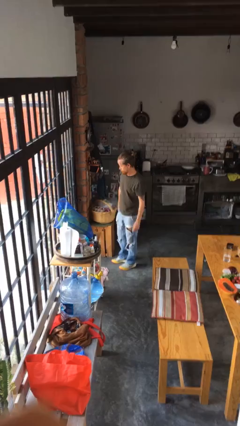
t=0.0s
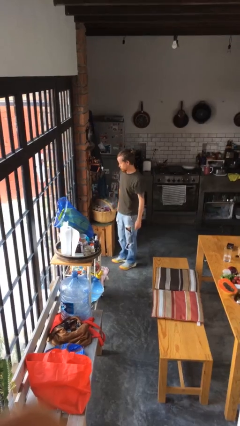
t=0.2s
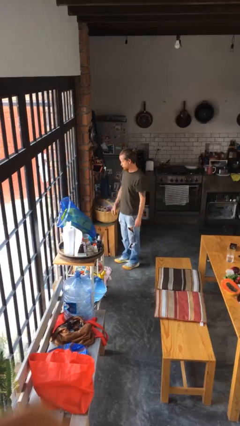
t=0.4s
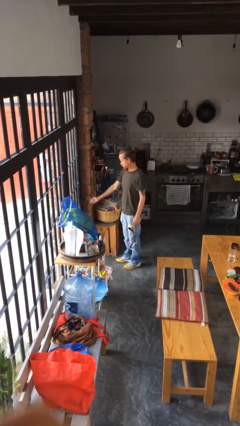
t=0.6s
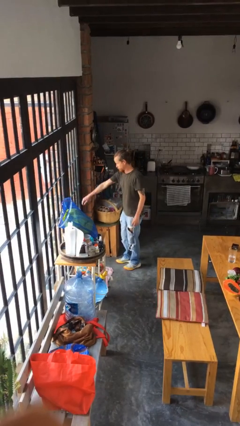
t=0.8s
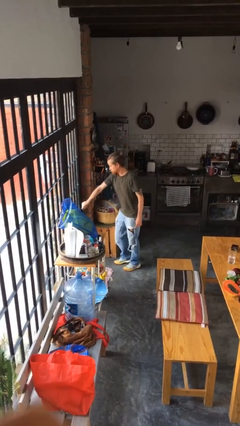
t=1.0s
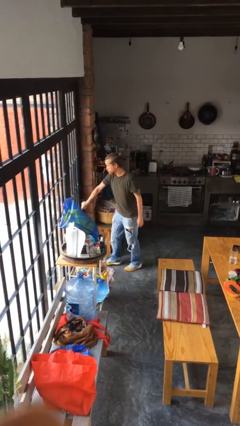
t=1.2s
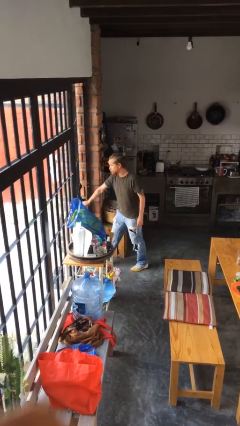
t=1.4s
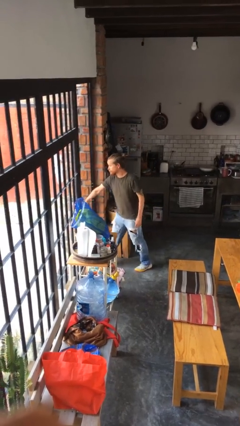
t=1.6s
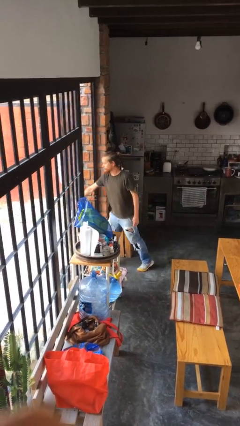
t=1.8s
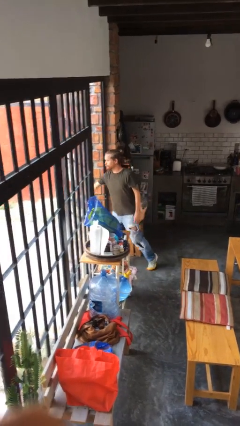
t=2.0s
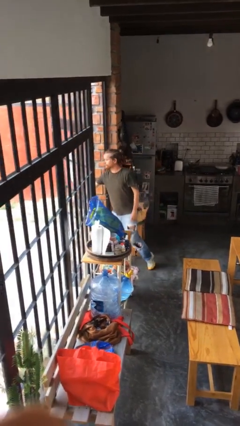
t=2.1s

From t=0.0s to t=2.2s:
person opens facility door

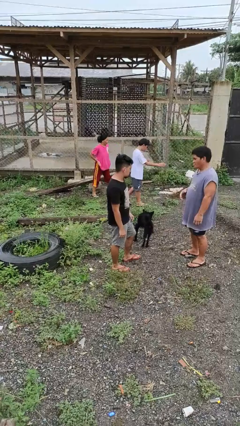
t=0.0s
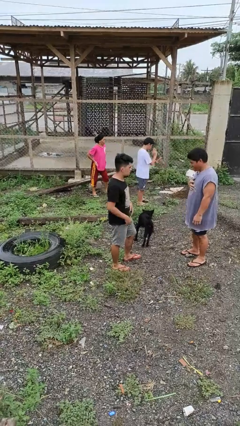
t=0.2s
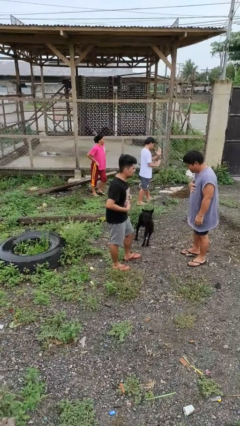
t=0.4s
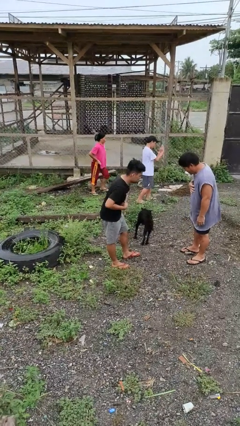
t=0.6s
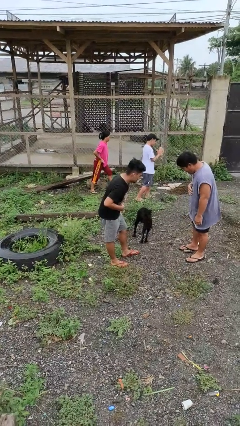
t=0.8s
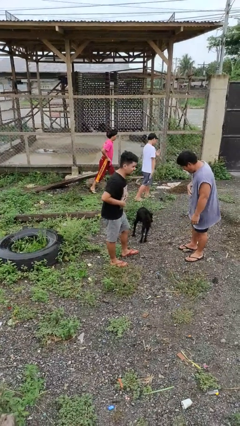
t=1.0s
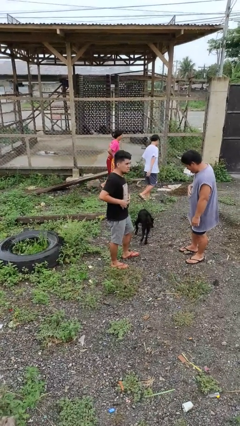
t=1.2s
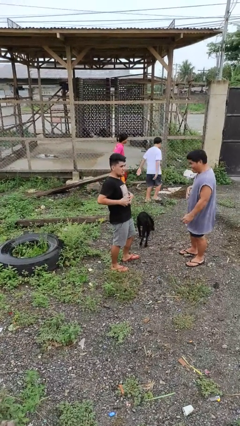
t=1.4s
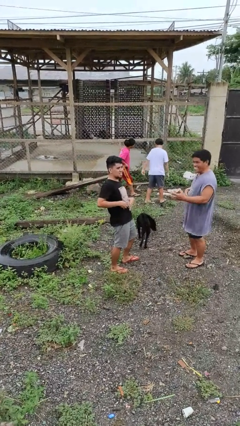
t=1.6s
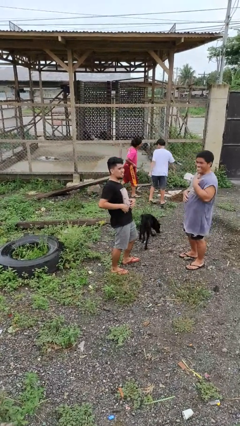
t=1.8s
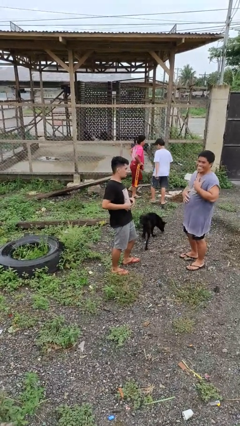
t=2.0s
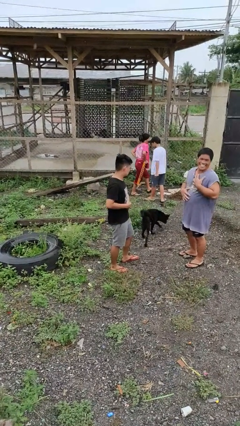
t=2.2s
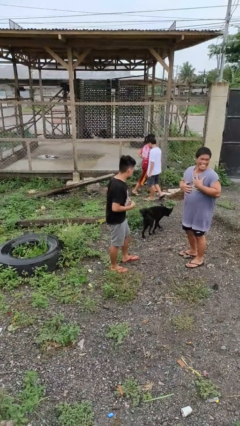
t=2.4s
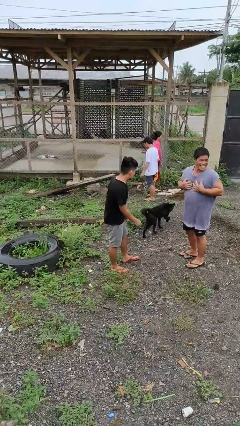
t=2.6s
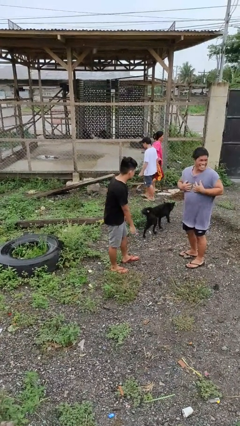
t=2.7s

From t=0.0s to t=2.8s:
person laughs with person

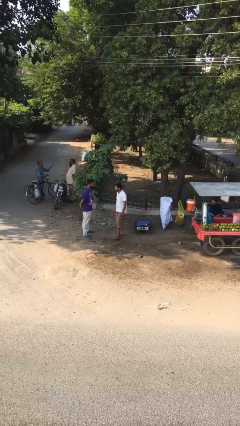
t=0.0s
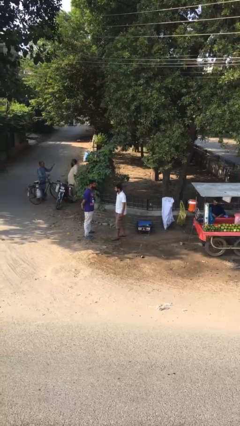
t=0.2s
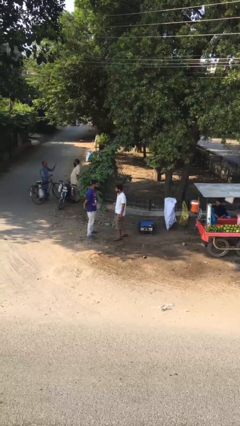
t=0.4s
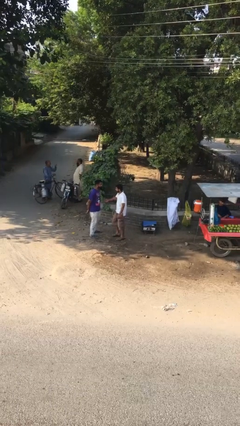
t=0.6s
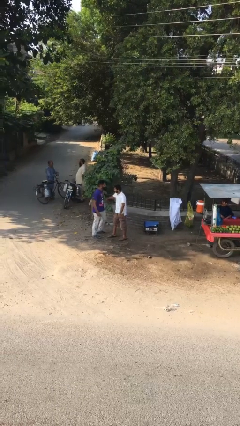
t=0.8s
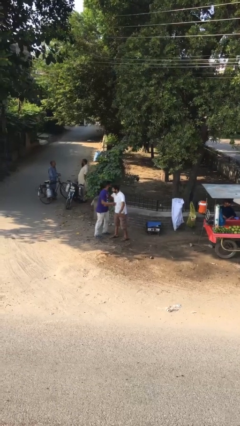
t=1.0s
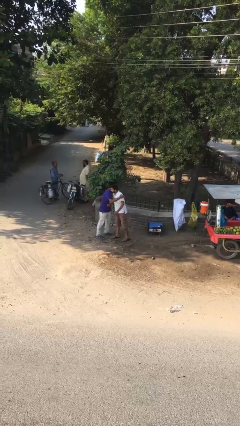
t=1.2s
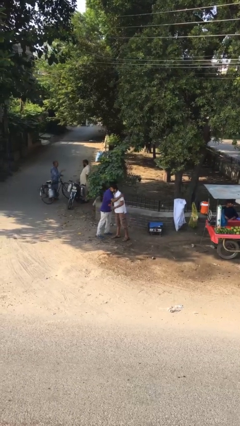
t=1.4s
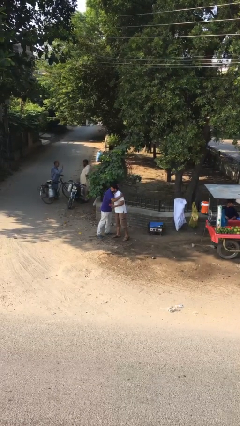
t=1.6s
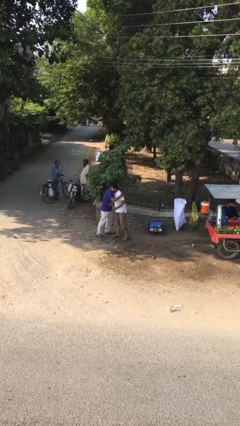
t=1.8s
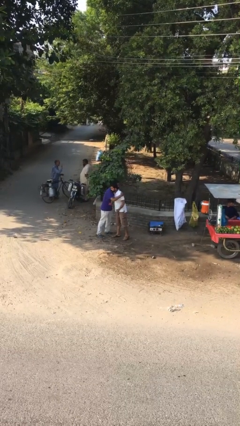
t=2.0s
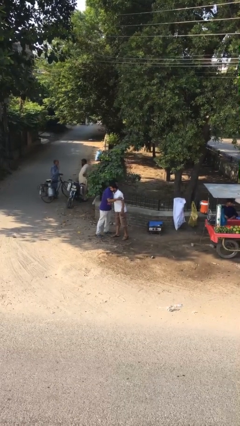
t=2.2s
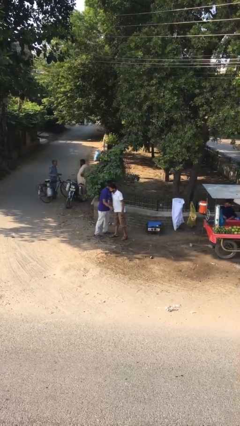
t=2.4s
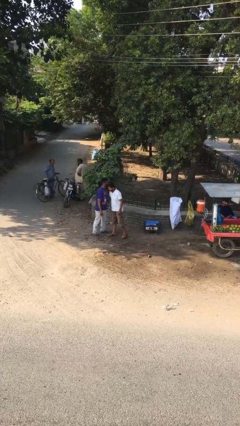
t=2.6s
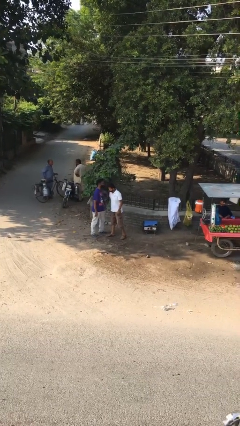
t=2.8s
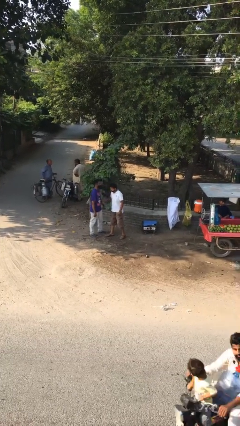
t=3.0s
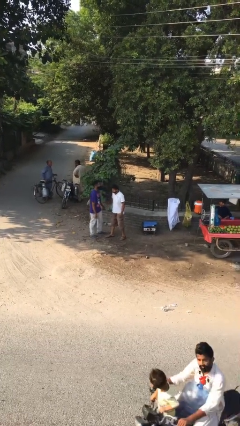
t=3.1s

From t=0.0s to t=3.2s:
person embraces person

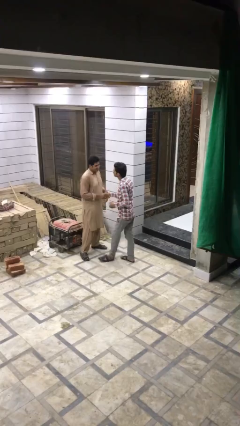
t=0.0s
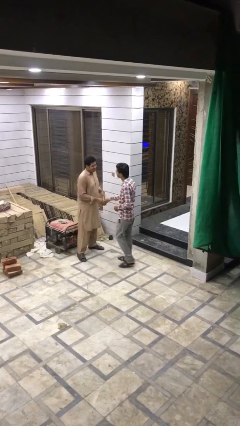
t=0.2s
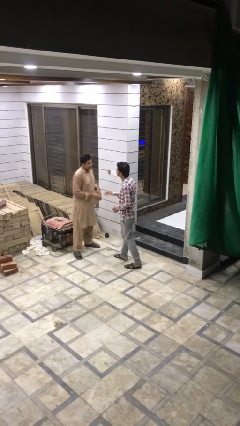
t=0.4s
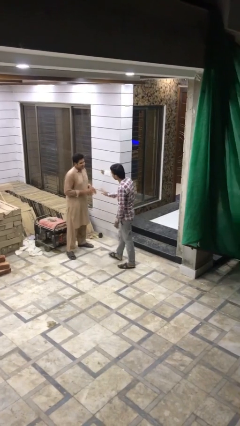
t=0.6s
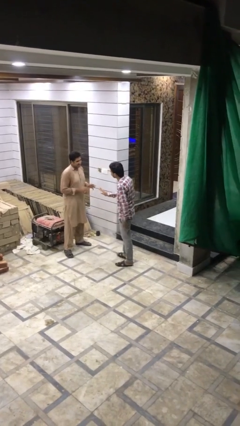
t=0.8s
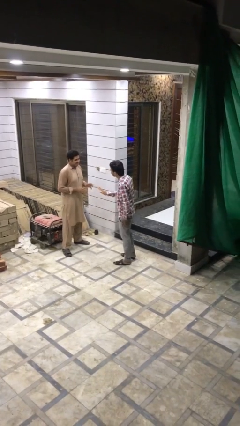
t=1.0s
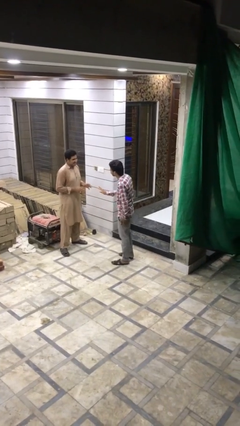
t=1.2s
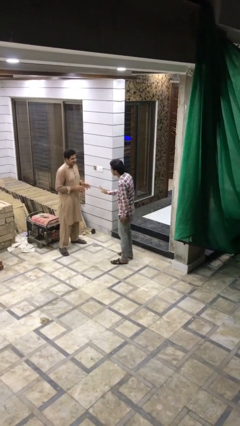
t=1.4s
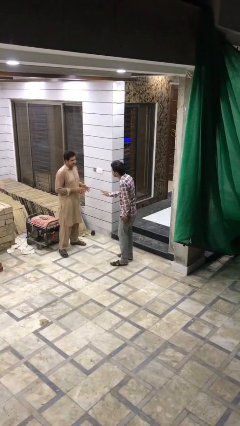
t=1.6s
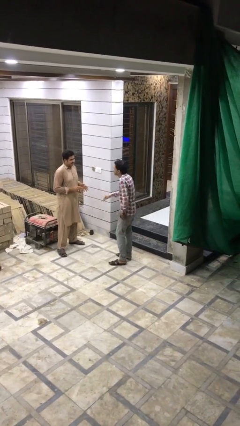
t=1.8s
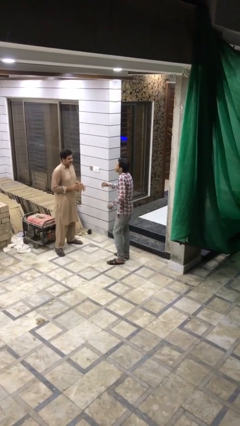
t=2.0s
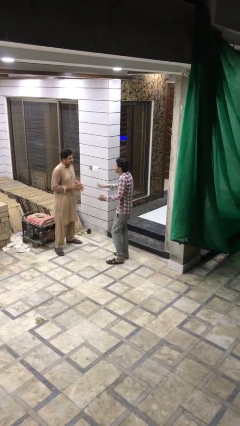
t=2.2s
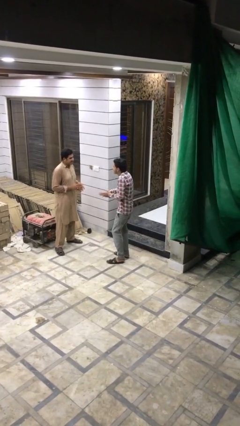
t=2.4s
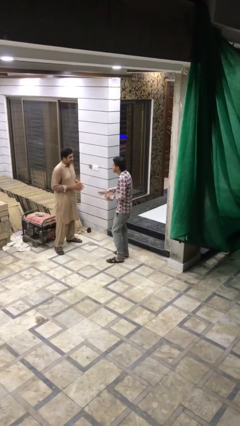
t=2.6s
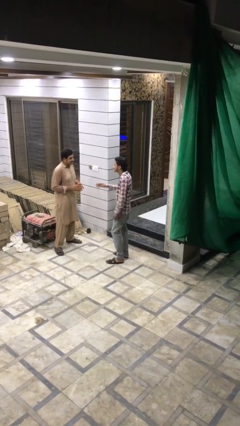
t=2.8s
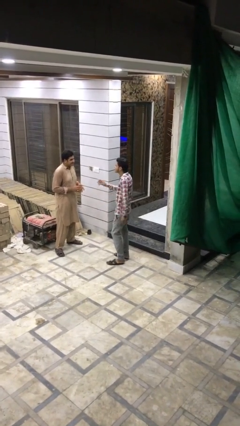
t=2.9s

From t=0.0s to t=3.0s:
person talks to person

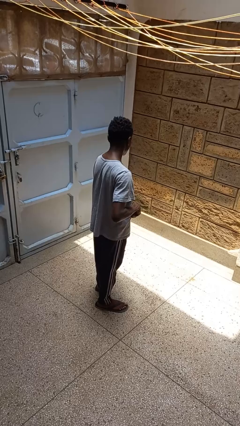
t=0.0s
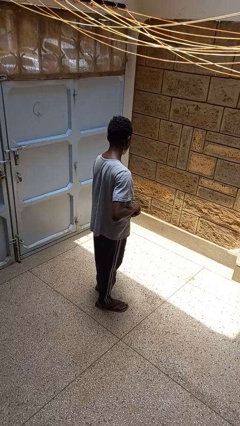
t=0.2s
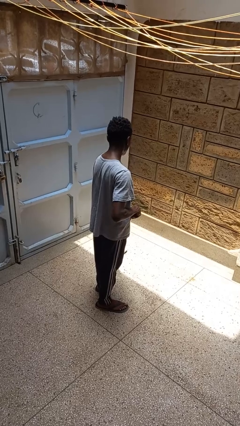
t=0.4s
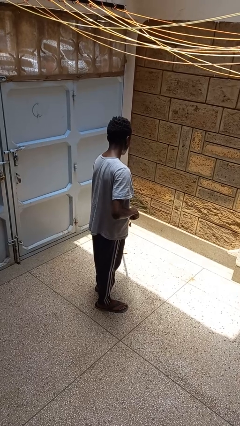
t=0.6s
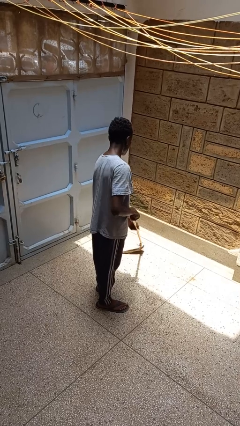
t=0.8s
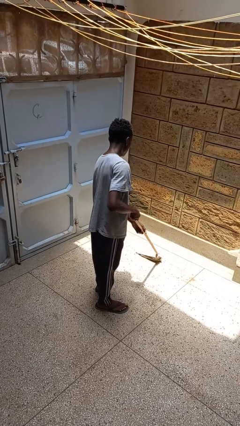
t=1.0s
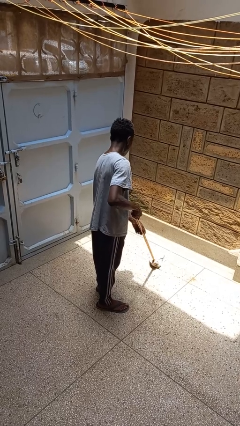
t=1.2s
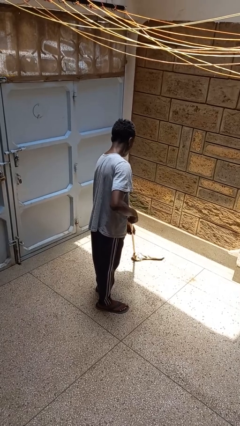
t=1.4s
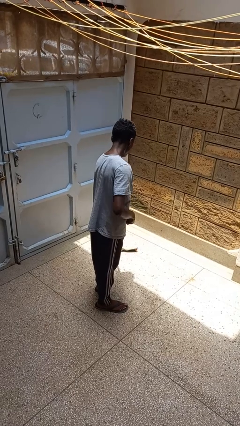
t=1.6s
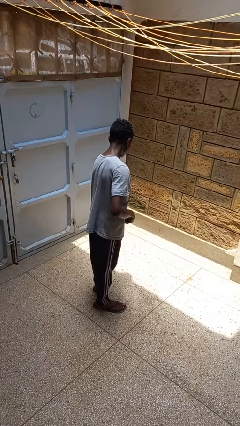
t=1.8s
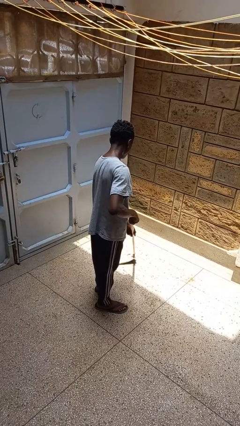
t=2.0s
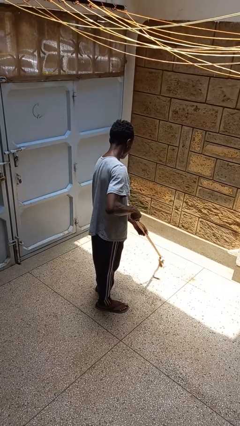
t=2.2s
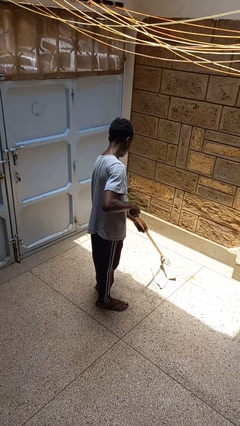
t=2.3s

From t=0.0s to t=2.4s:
person mops

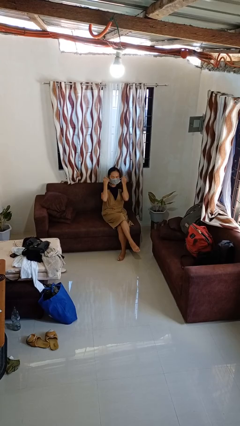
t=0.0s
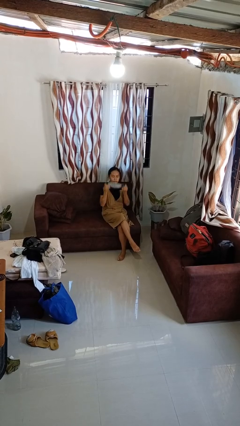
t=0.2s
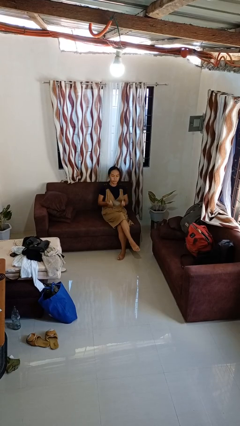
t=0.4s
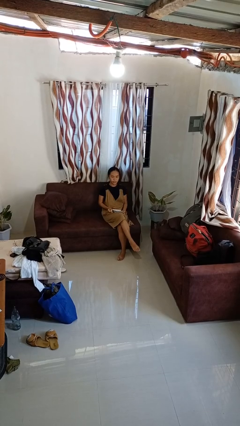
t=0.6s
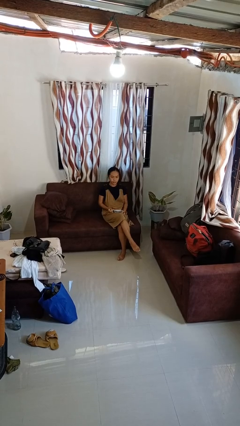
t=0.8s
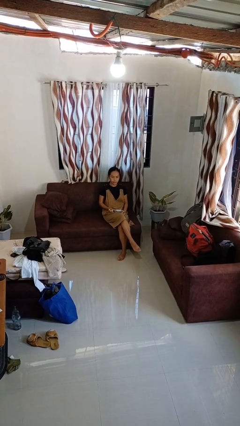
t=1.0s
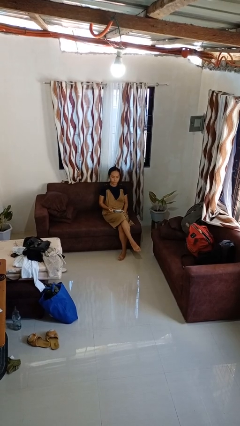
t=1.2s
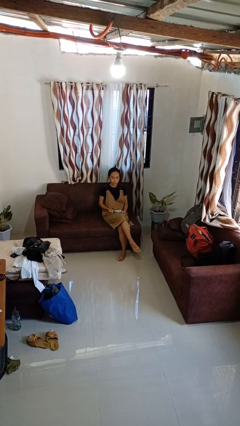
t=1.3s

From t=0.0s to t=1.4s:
person takes off facemask

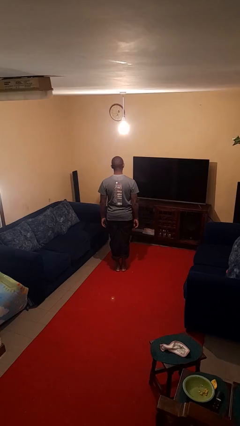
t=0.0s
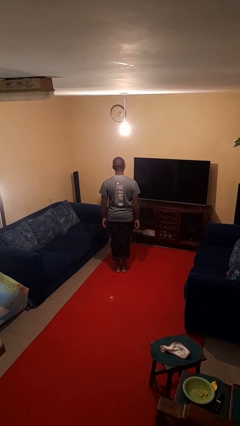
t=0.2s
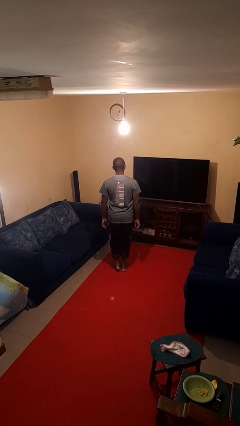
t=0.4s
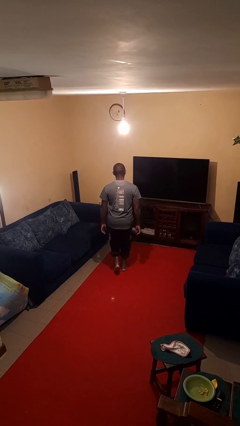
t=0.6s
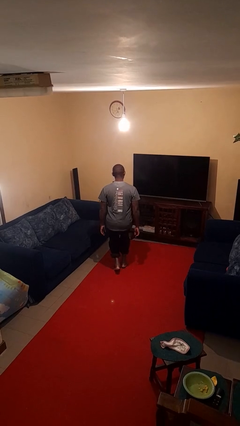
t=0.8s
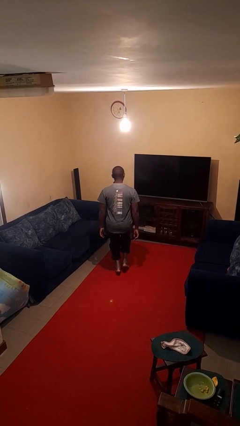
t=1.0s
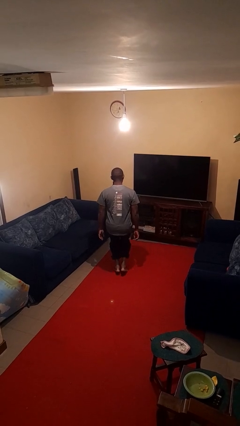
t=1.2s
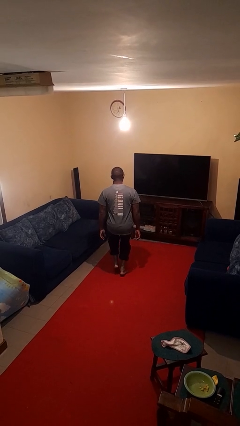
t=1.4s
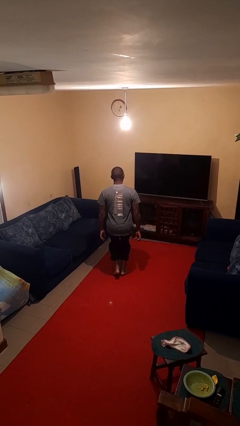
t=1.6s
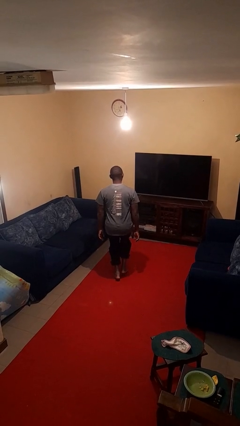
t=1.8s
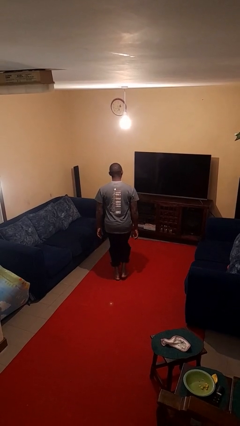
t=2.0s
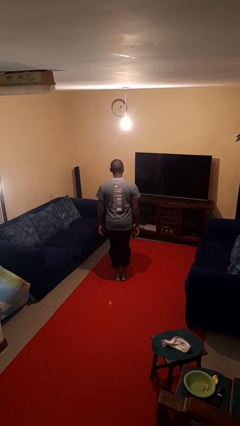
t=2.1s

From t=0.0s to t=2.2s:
person walks tiptoe

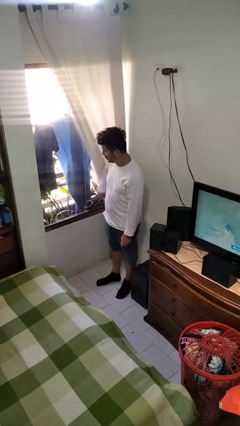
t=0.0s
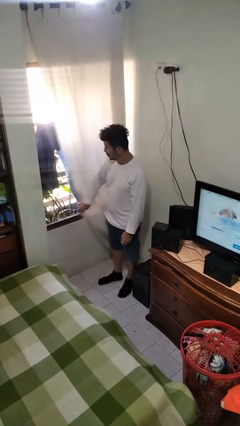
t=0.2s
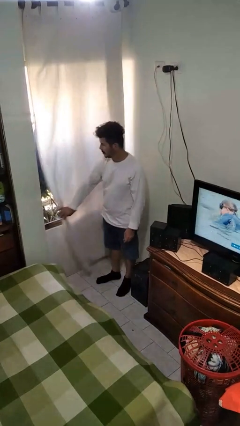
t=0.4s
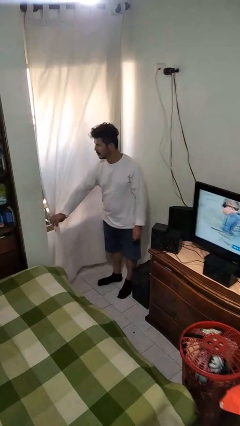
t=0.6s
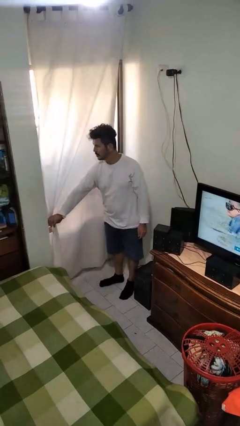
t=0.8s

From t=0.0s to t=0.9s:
person closes curtains
